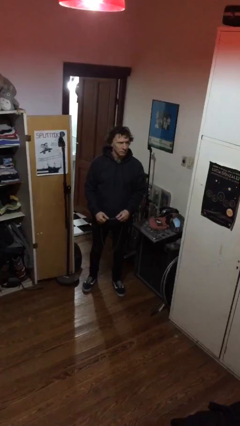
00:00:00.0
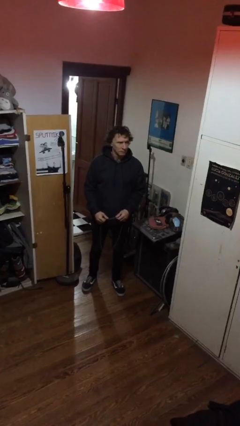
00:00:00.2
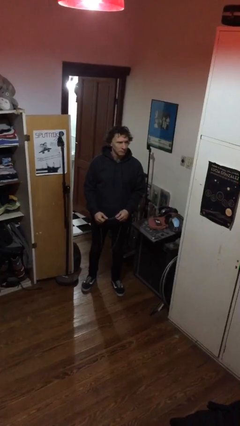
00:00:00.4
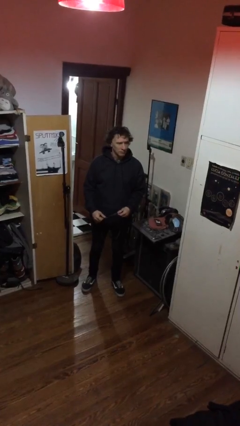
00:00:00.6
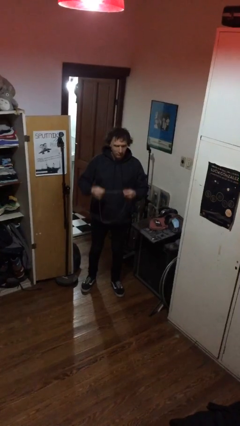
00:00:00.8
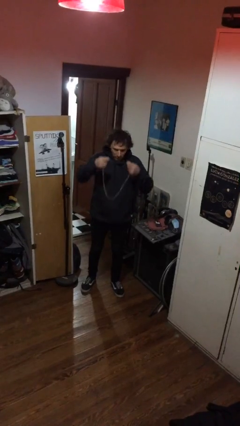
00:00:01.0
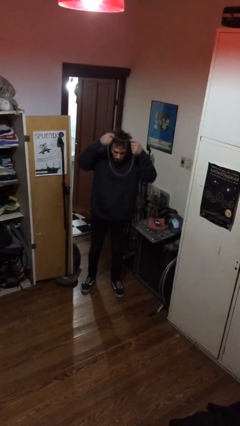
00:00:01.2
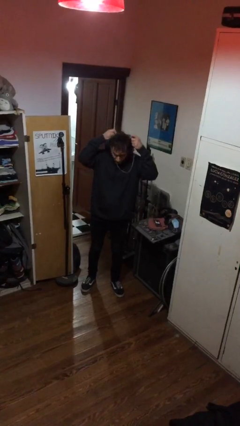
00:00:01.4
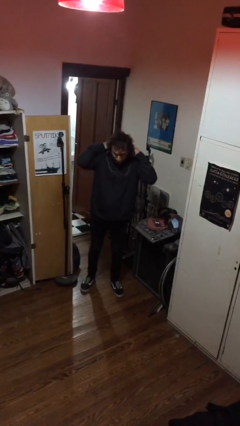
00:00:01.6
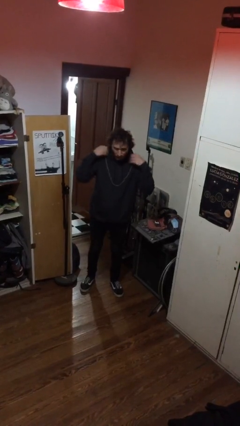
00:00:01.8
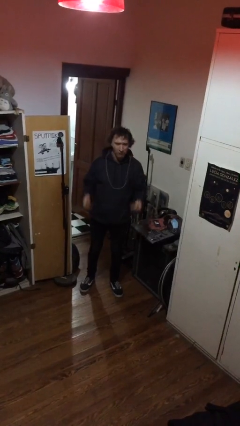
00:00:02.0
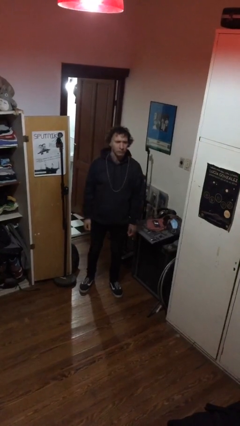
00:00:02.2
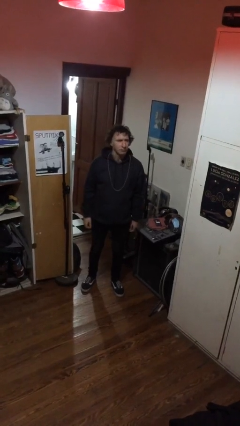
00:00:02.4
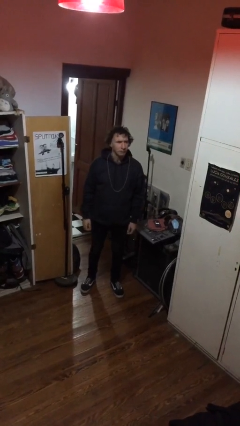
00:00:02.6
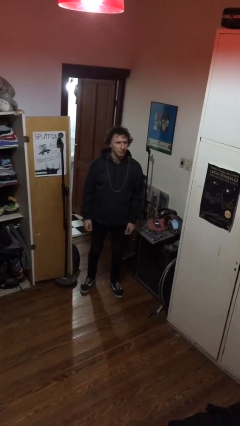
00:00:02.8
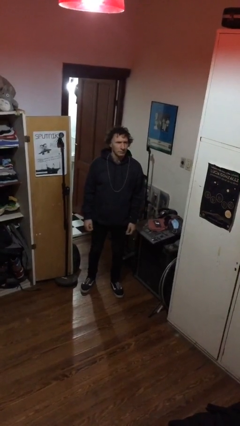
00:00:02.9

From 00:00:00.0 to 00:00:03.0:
person puts on necklace

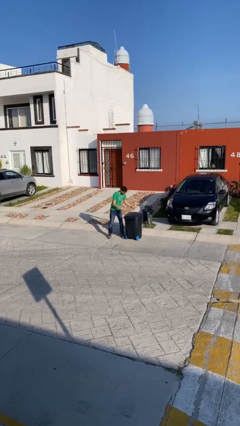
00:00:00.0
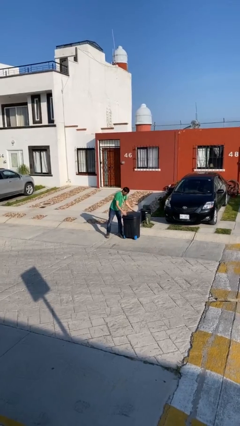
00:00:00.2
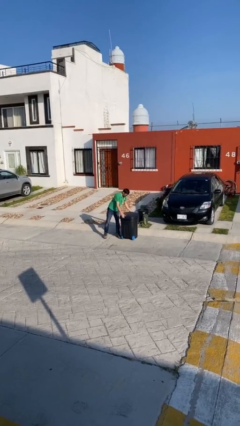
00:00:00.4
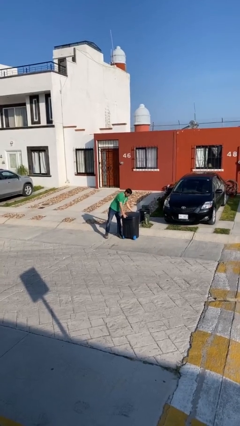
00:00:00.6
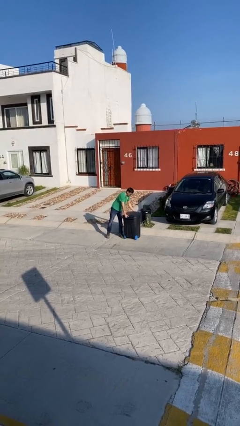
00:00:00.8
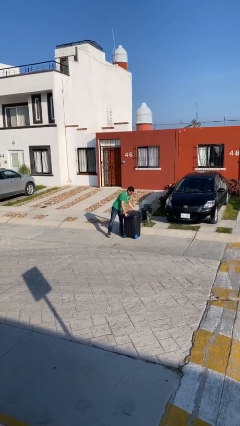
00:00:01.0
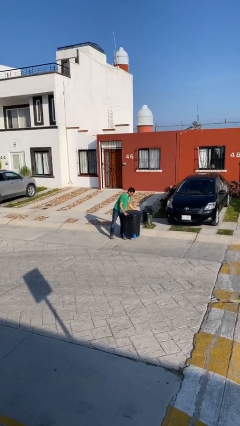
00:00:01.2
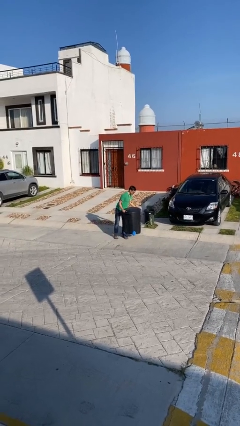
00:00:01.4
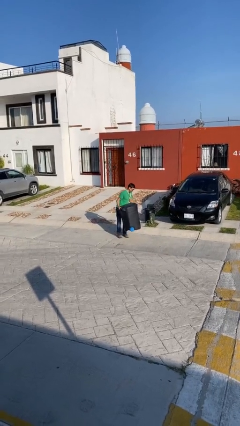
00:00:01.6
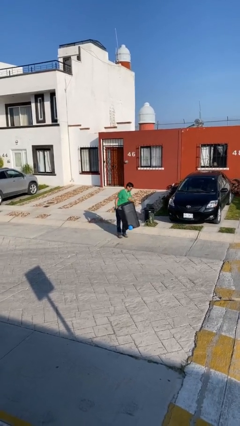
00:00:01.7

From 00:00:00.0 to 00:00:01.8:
person picks up object from floor

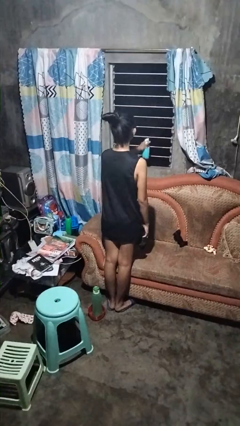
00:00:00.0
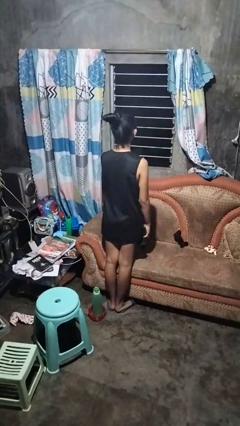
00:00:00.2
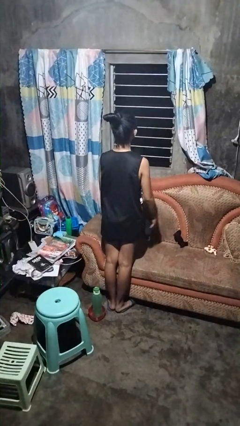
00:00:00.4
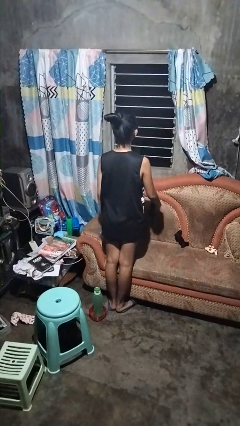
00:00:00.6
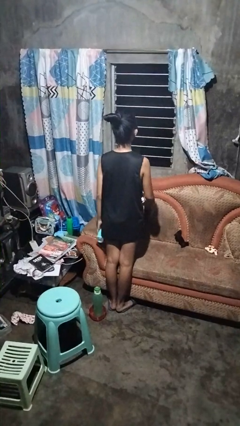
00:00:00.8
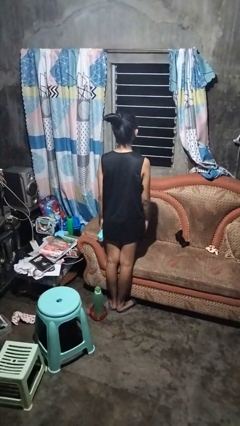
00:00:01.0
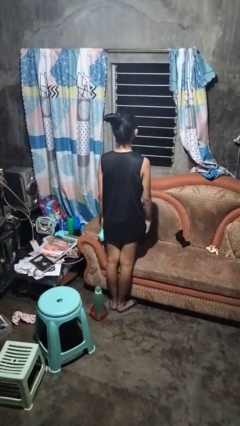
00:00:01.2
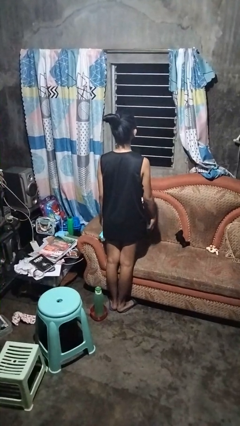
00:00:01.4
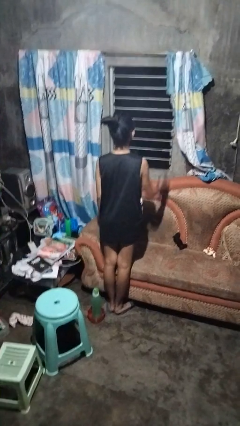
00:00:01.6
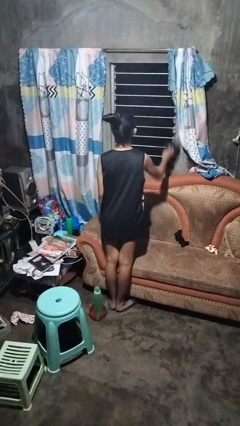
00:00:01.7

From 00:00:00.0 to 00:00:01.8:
person sprays from bottle

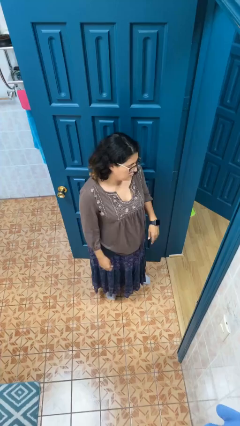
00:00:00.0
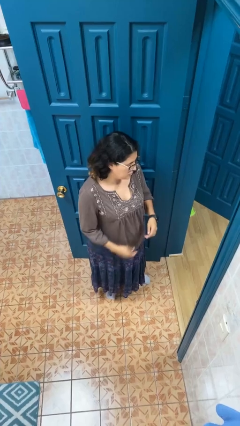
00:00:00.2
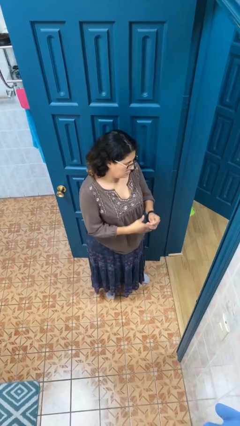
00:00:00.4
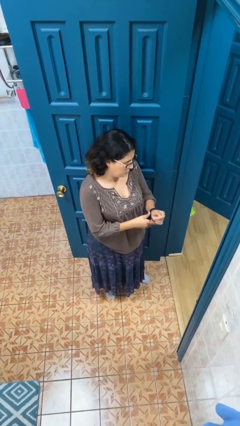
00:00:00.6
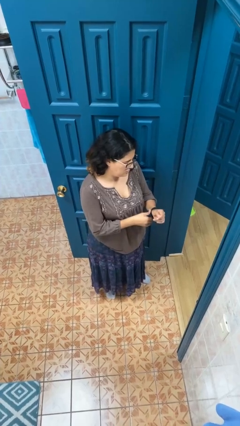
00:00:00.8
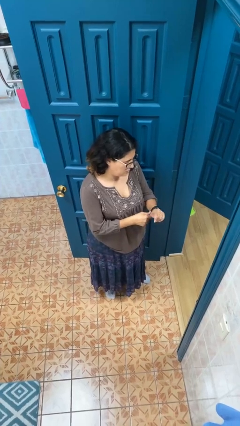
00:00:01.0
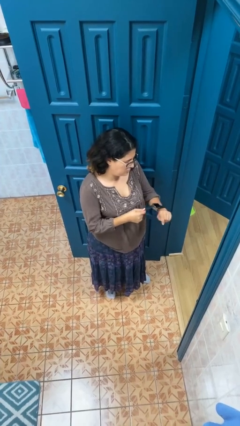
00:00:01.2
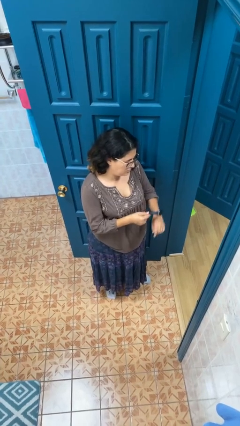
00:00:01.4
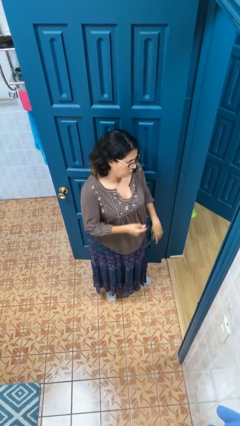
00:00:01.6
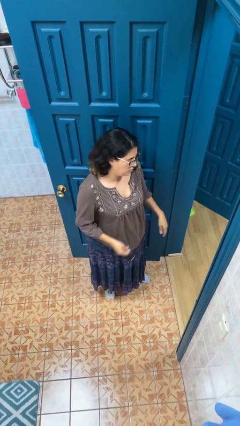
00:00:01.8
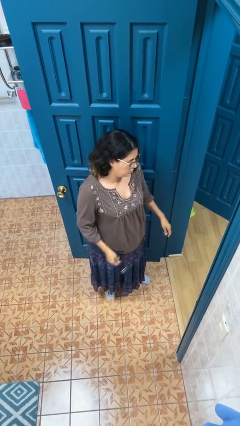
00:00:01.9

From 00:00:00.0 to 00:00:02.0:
person takes off wristwatch

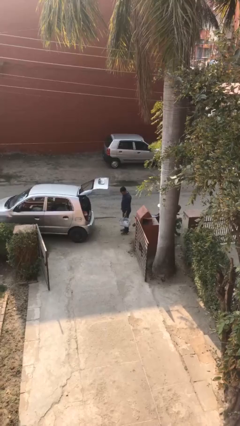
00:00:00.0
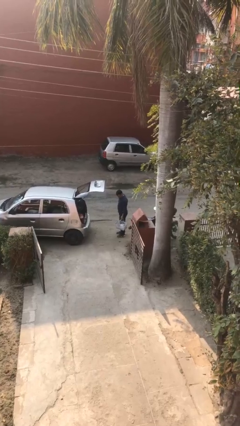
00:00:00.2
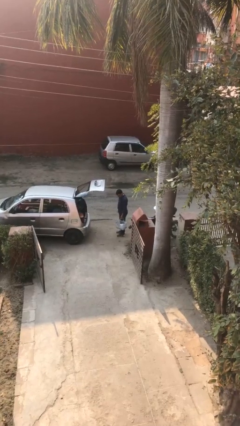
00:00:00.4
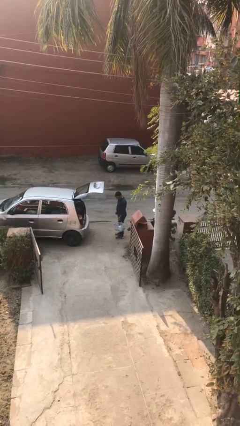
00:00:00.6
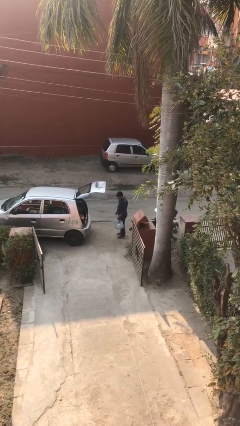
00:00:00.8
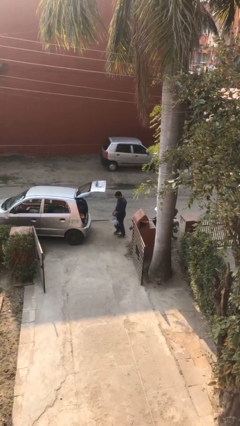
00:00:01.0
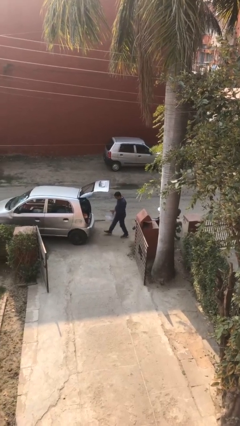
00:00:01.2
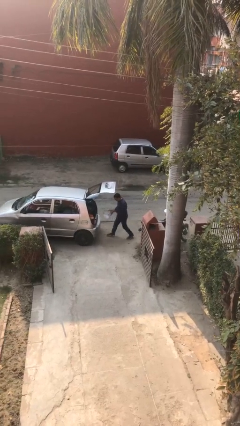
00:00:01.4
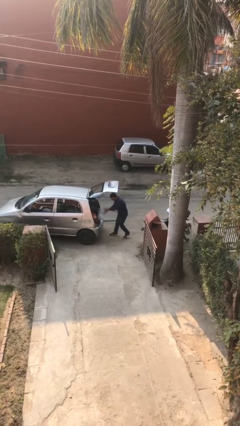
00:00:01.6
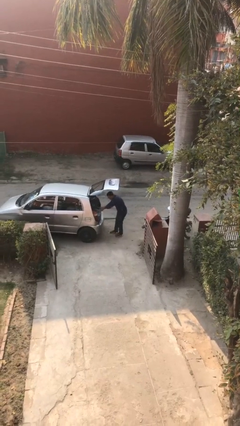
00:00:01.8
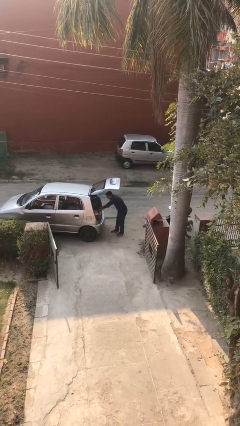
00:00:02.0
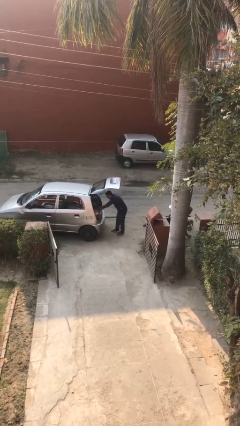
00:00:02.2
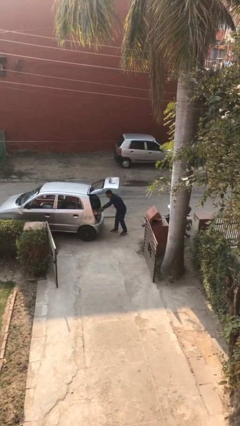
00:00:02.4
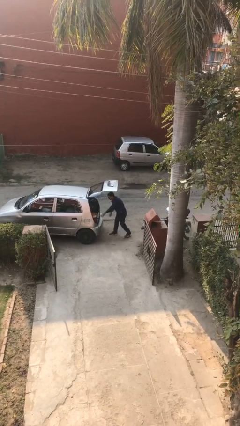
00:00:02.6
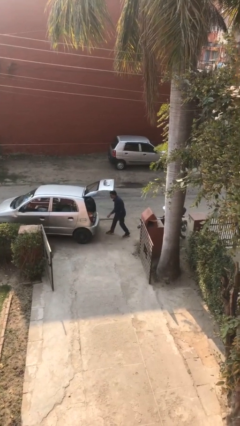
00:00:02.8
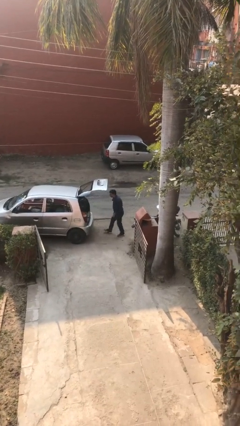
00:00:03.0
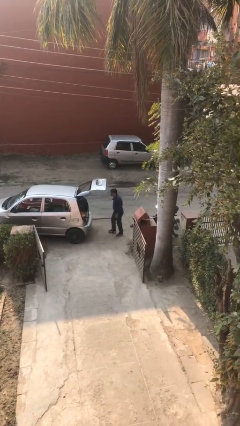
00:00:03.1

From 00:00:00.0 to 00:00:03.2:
person loads car

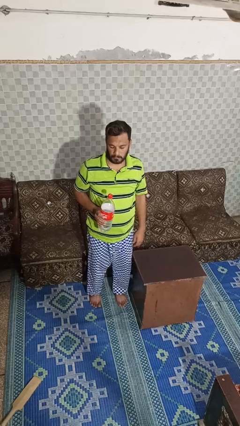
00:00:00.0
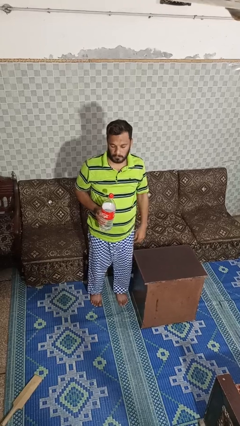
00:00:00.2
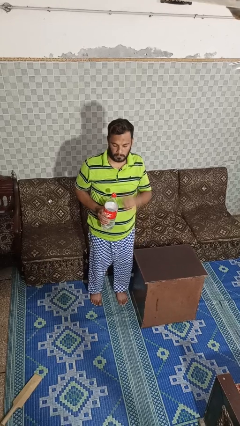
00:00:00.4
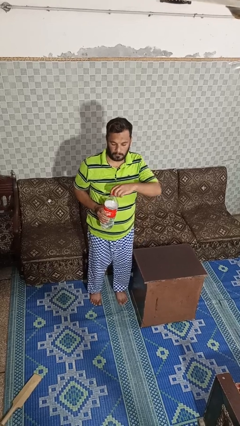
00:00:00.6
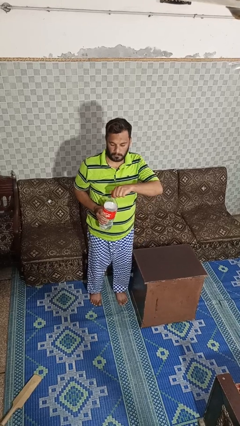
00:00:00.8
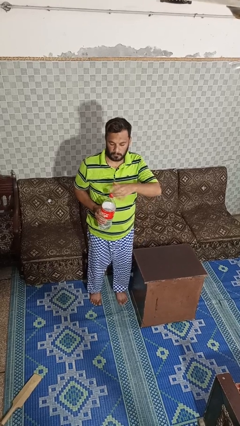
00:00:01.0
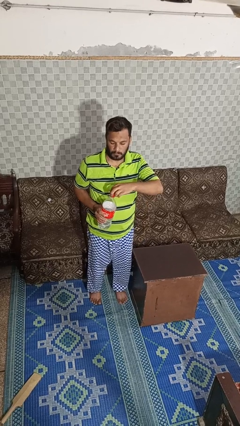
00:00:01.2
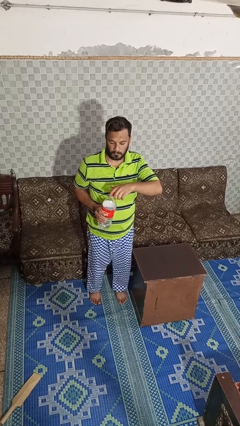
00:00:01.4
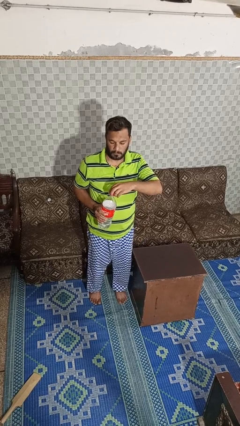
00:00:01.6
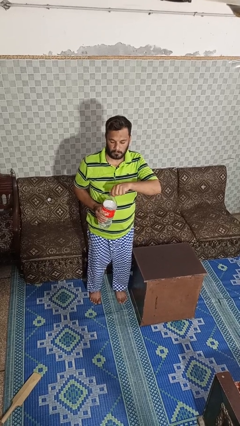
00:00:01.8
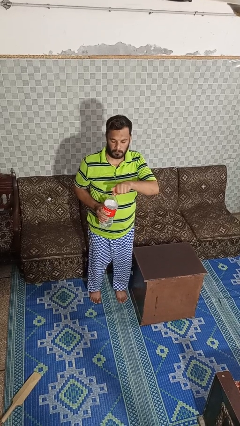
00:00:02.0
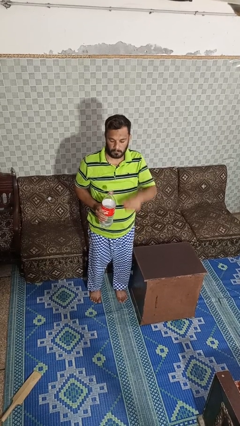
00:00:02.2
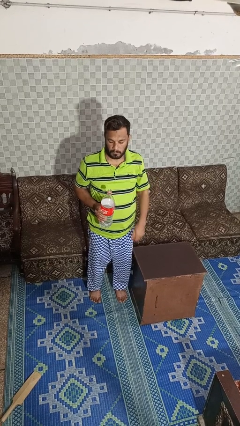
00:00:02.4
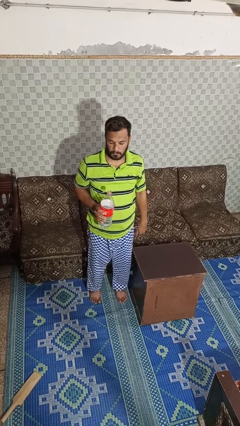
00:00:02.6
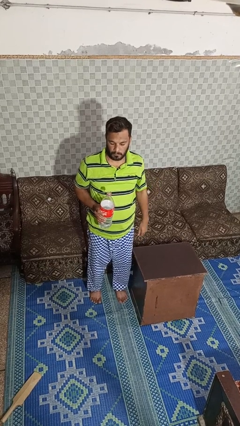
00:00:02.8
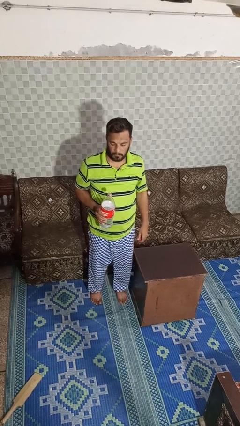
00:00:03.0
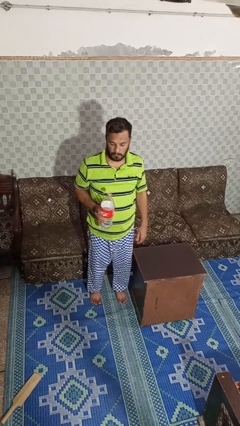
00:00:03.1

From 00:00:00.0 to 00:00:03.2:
person unscrews lid from bottle

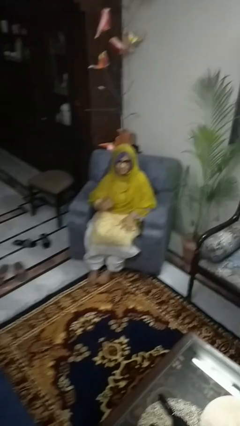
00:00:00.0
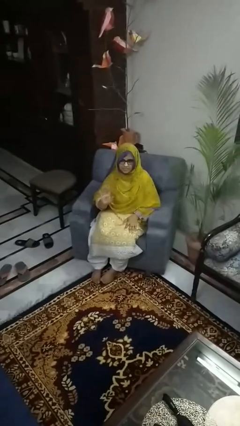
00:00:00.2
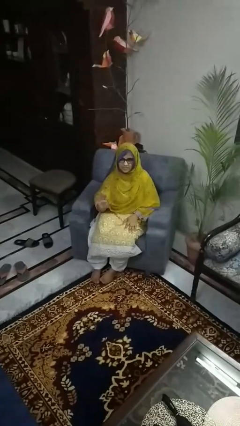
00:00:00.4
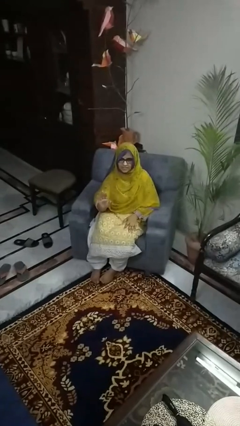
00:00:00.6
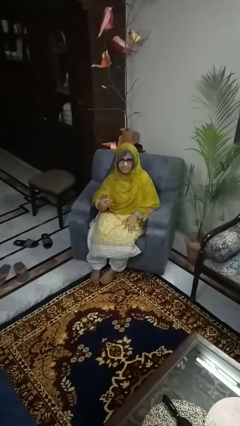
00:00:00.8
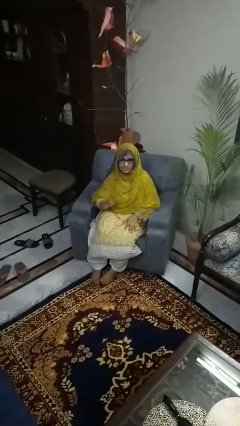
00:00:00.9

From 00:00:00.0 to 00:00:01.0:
person gestures stop

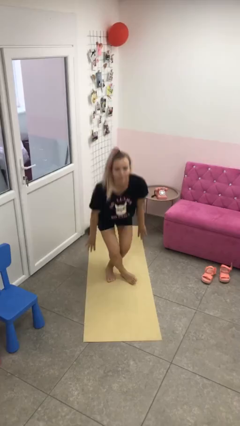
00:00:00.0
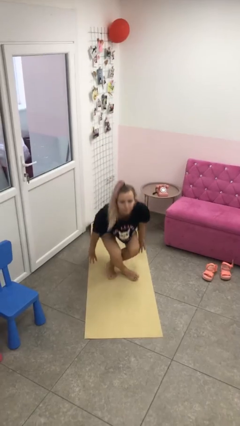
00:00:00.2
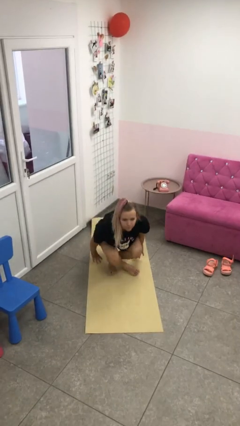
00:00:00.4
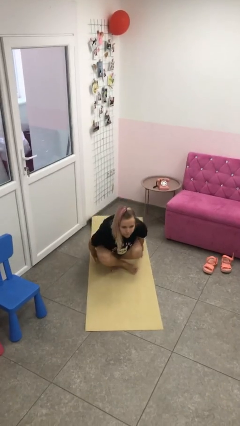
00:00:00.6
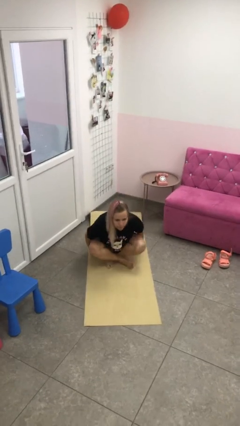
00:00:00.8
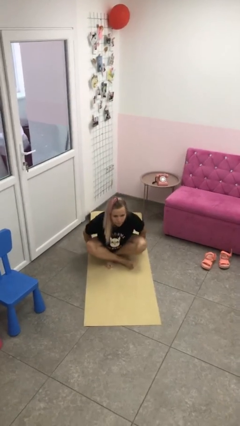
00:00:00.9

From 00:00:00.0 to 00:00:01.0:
person sits crisscross
